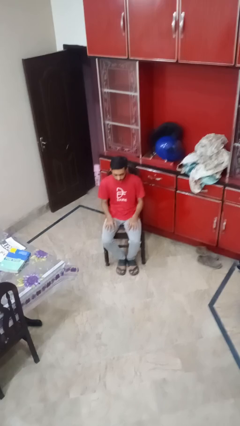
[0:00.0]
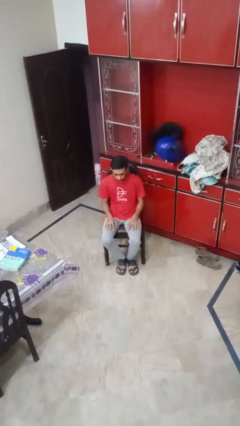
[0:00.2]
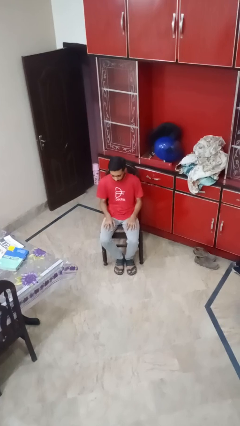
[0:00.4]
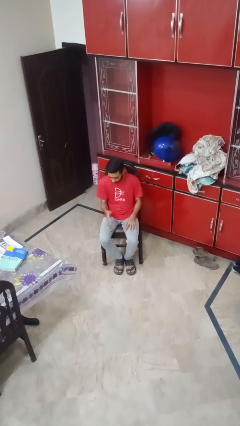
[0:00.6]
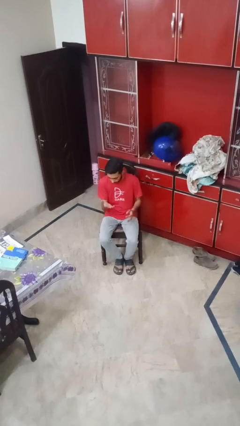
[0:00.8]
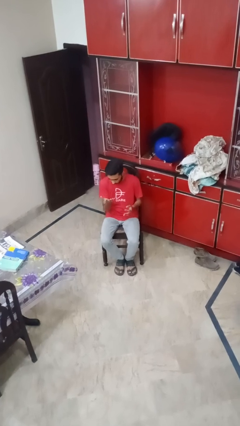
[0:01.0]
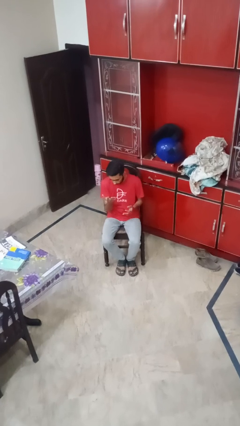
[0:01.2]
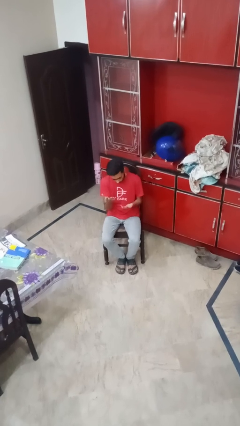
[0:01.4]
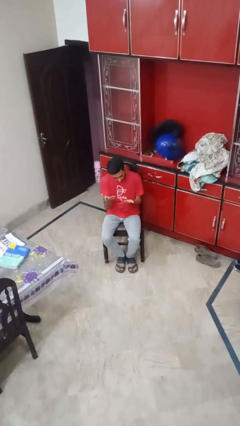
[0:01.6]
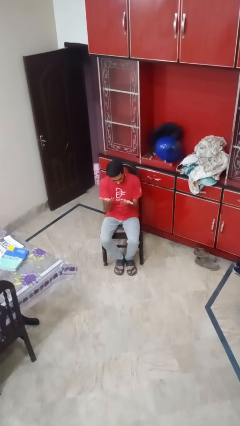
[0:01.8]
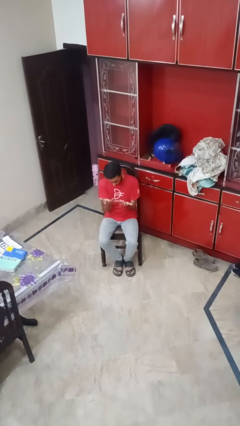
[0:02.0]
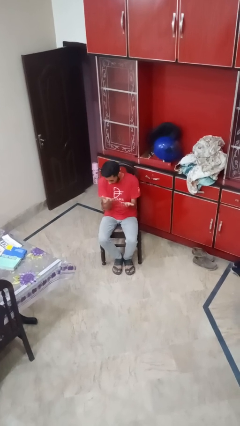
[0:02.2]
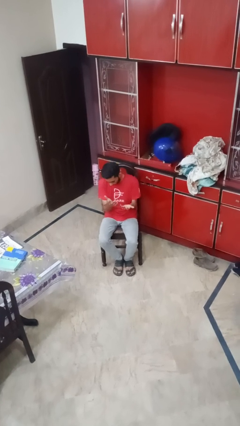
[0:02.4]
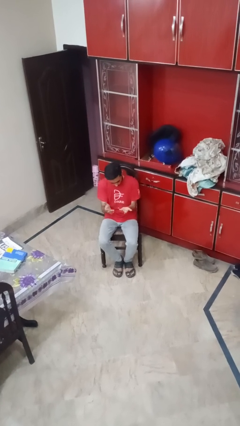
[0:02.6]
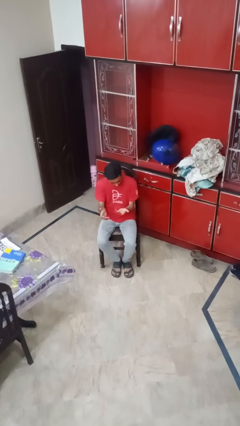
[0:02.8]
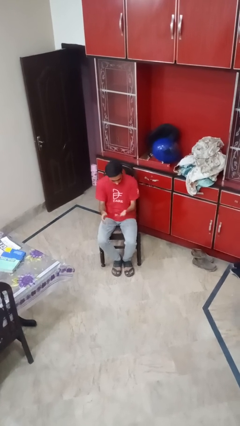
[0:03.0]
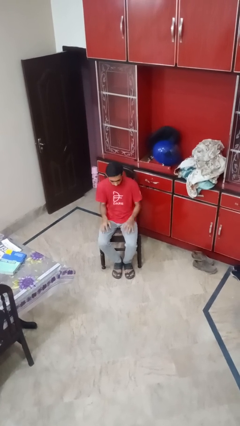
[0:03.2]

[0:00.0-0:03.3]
person looks at hands in lap

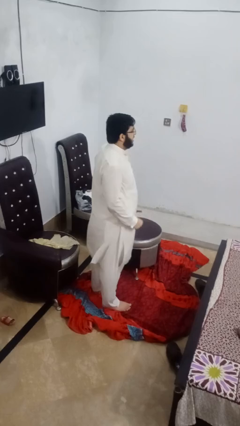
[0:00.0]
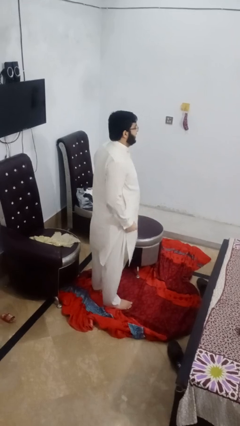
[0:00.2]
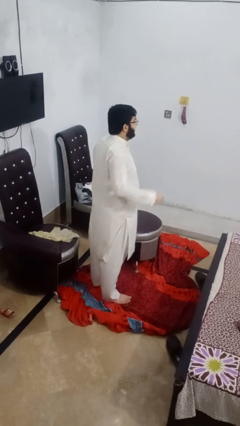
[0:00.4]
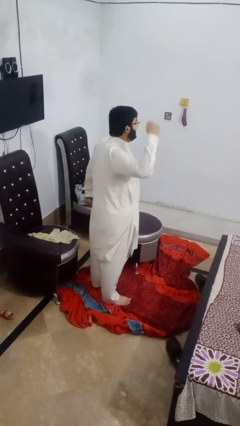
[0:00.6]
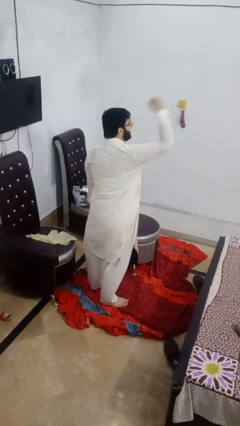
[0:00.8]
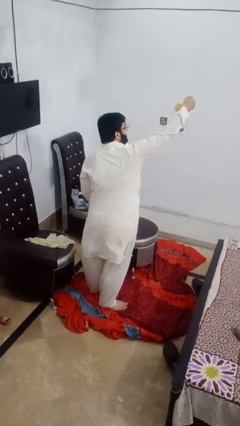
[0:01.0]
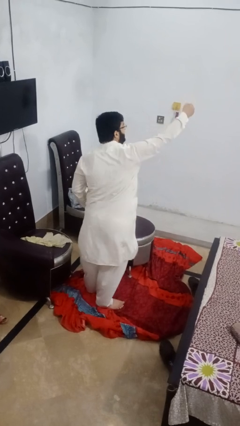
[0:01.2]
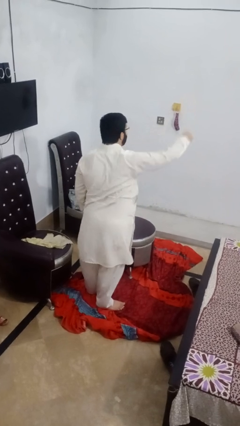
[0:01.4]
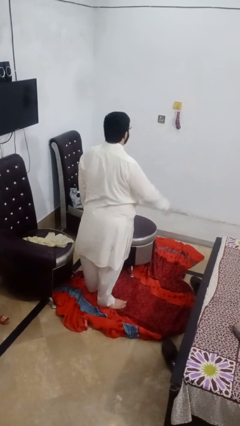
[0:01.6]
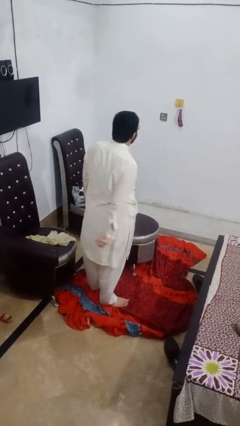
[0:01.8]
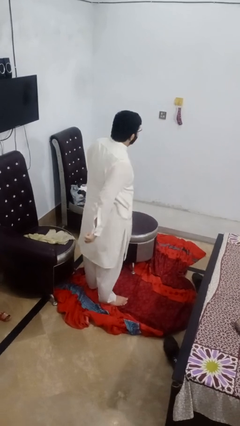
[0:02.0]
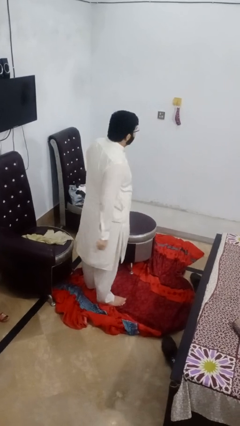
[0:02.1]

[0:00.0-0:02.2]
person punches

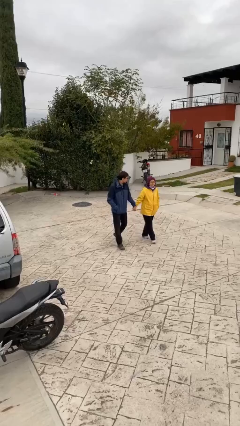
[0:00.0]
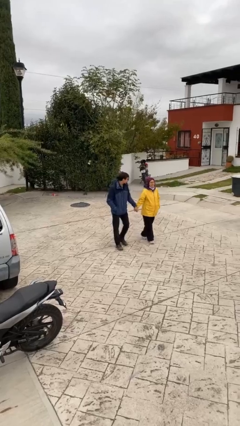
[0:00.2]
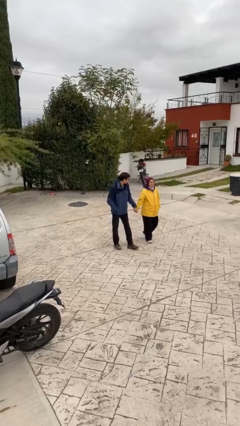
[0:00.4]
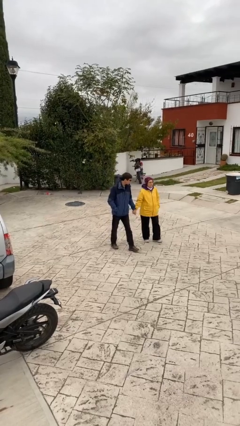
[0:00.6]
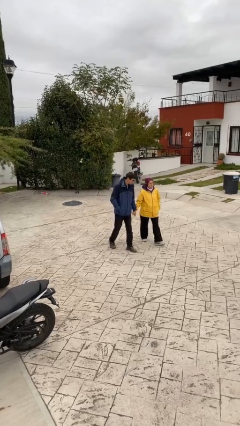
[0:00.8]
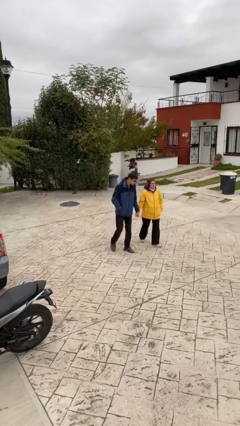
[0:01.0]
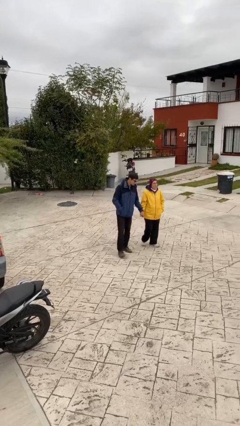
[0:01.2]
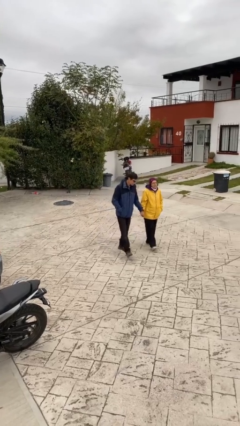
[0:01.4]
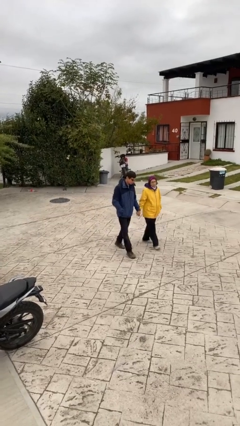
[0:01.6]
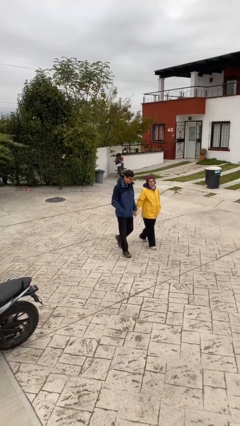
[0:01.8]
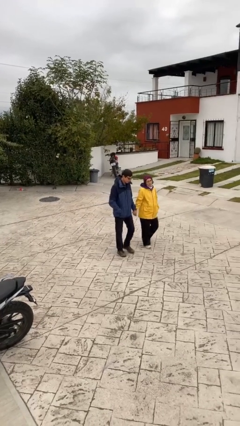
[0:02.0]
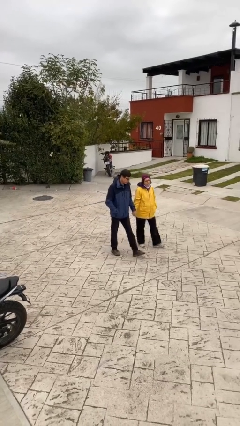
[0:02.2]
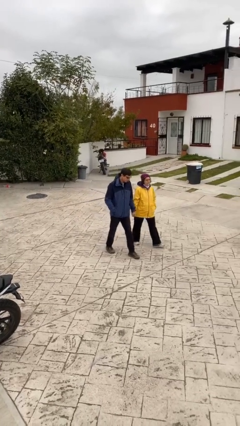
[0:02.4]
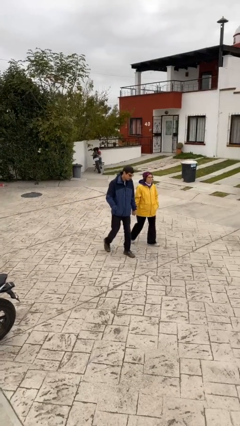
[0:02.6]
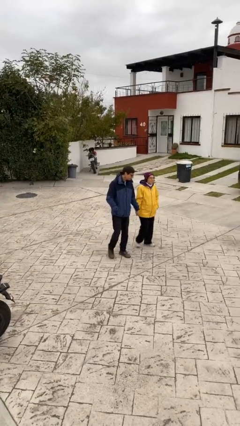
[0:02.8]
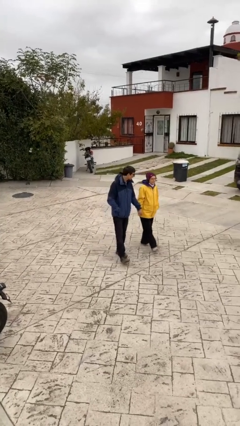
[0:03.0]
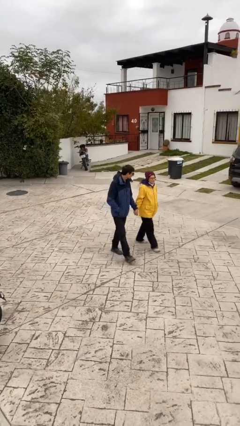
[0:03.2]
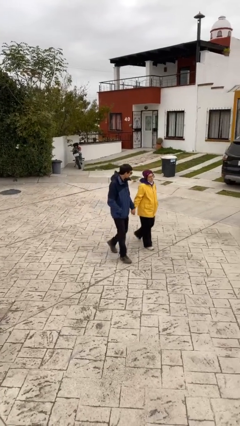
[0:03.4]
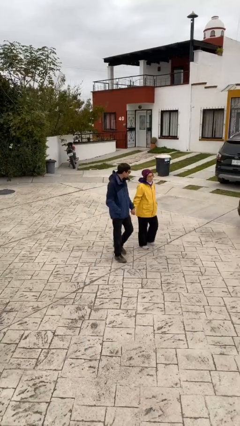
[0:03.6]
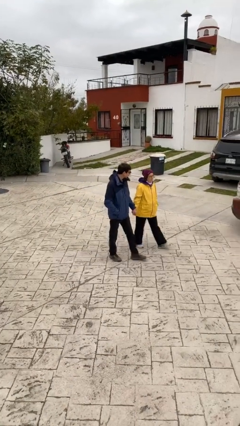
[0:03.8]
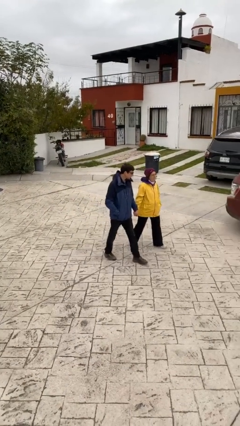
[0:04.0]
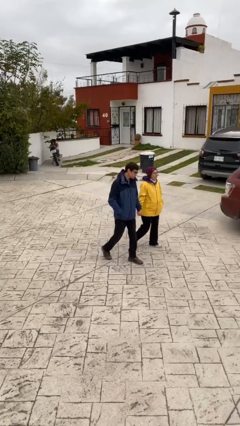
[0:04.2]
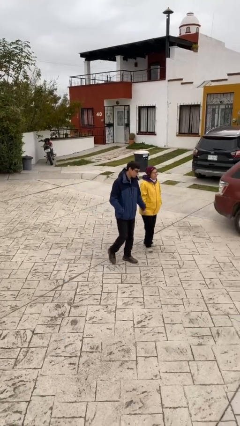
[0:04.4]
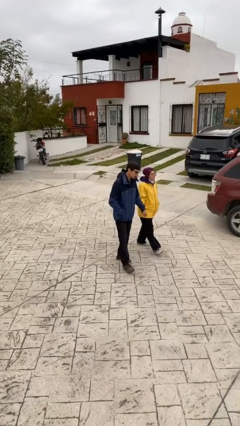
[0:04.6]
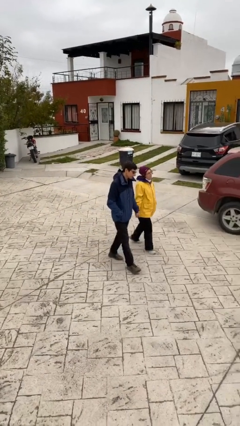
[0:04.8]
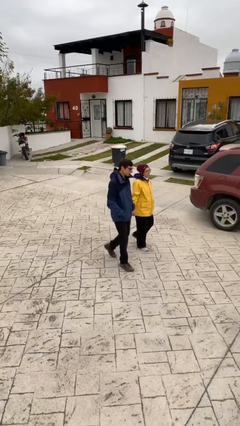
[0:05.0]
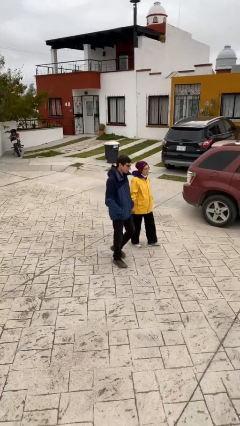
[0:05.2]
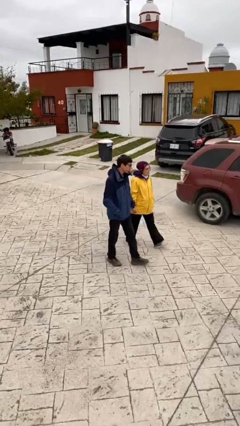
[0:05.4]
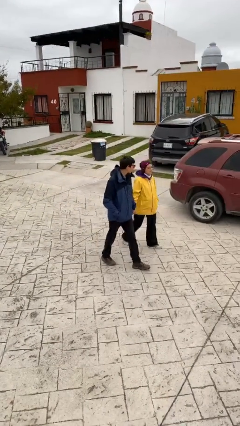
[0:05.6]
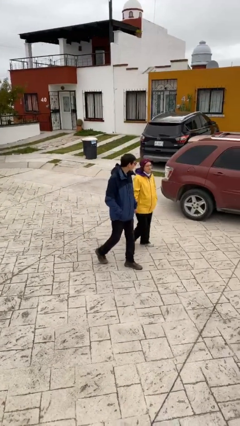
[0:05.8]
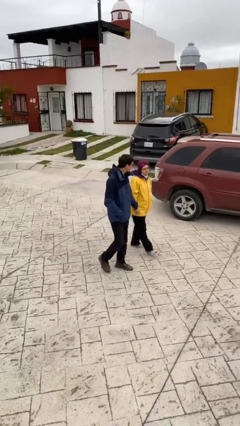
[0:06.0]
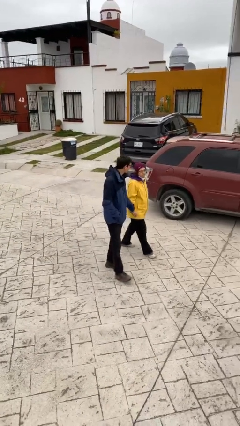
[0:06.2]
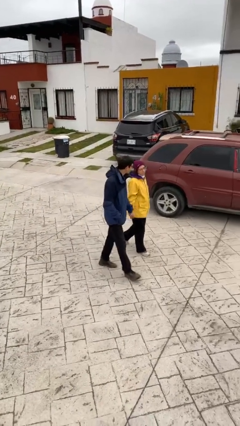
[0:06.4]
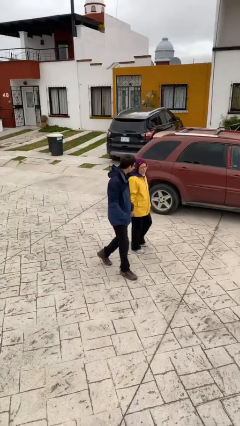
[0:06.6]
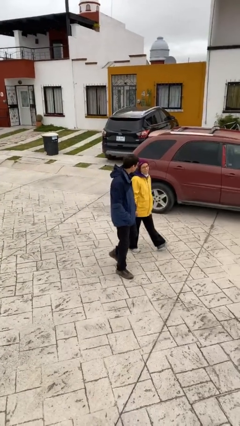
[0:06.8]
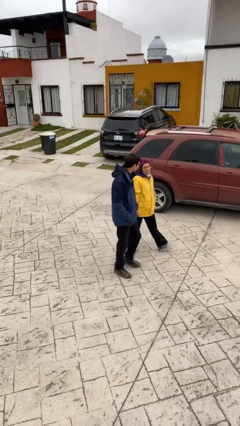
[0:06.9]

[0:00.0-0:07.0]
person holds hand

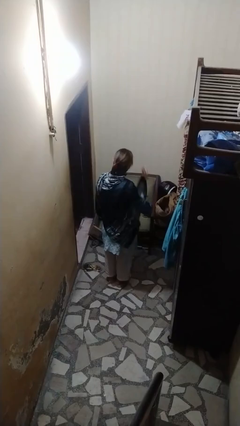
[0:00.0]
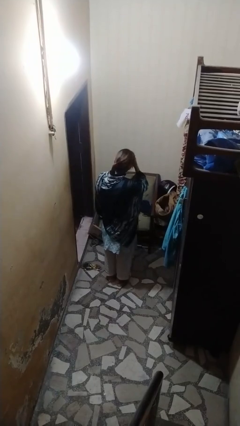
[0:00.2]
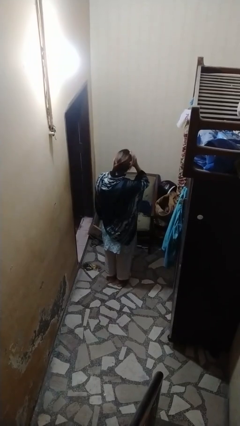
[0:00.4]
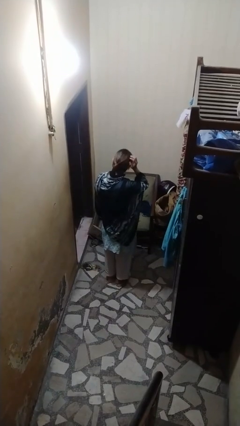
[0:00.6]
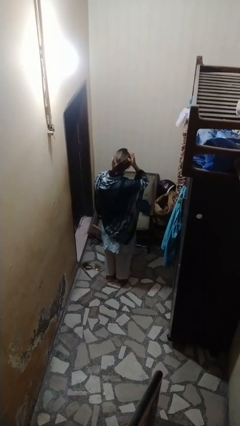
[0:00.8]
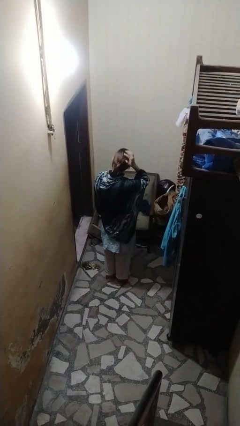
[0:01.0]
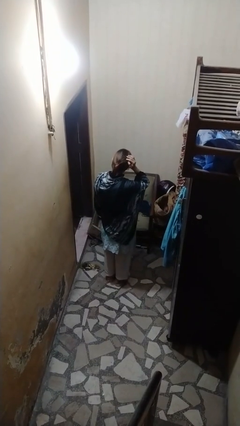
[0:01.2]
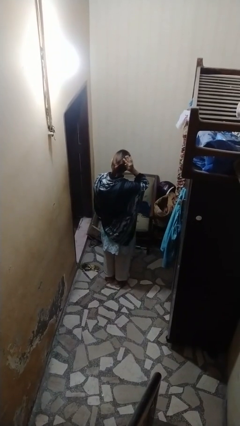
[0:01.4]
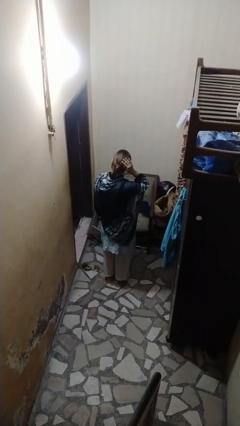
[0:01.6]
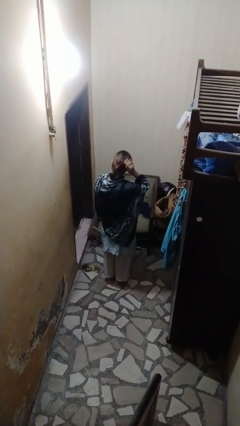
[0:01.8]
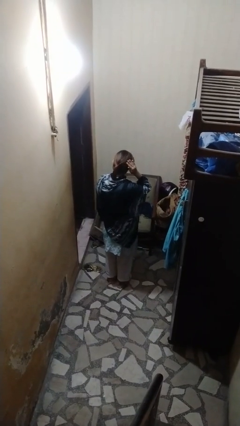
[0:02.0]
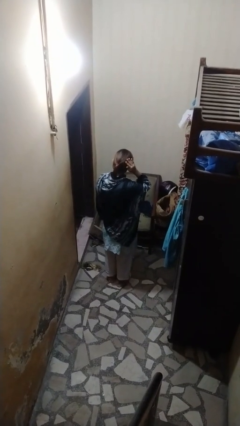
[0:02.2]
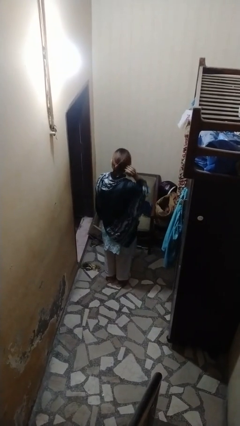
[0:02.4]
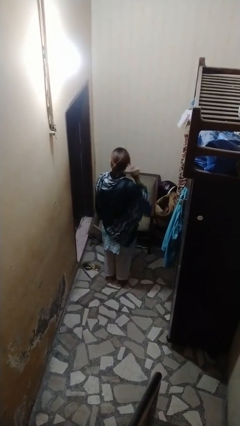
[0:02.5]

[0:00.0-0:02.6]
person strokes hair

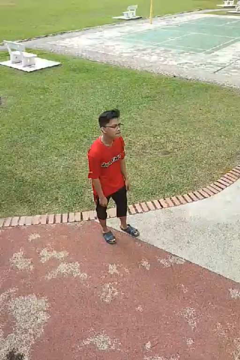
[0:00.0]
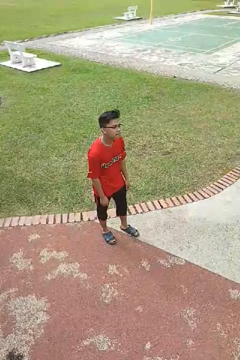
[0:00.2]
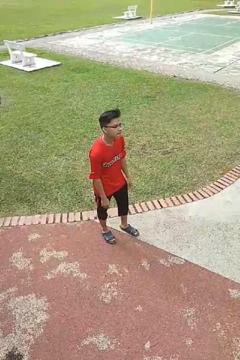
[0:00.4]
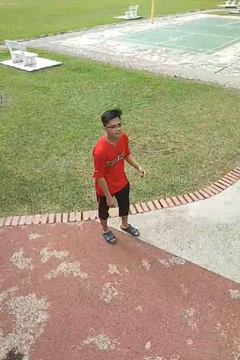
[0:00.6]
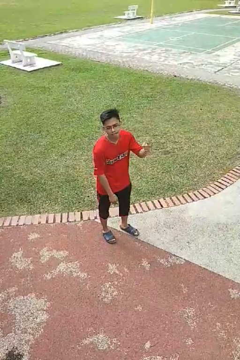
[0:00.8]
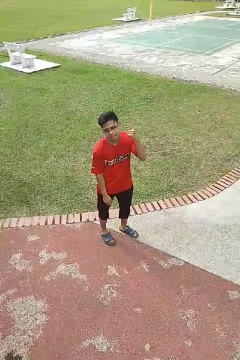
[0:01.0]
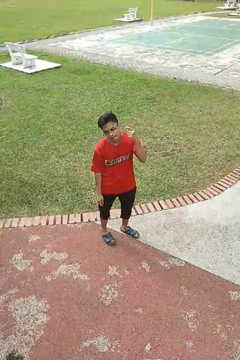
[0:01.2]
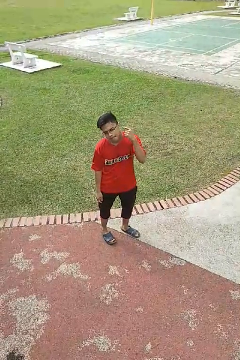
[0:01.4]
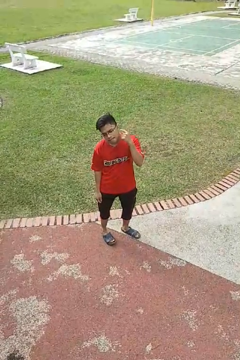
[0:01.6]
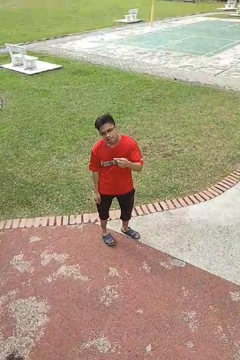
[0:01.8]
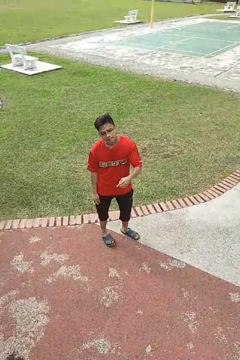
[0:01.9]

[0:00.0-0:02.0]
person gestures listen closely

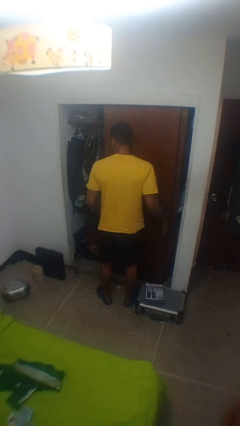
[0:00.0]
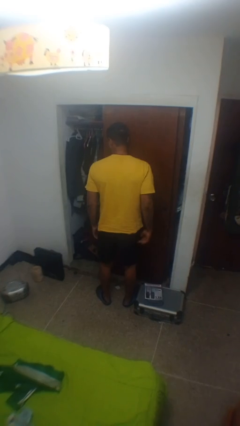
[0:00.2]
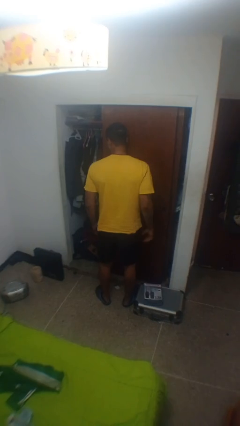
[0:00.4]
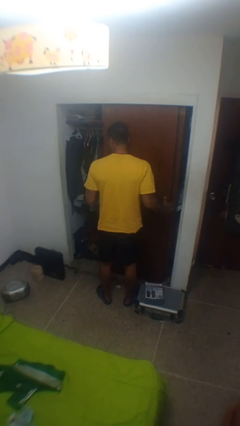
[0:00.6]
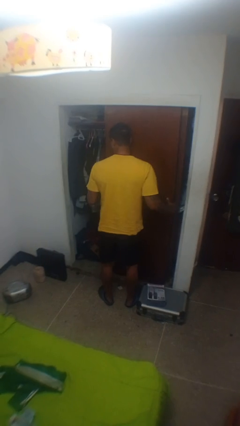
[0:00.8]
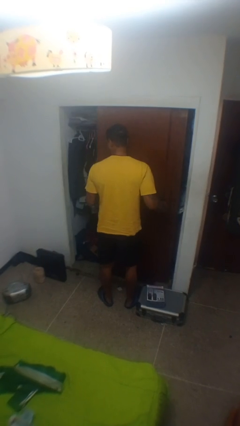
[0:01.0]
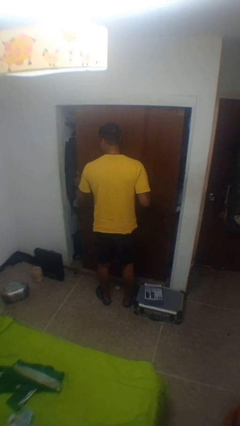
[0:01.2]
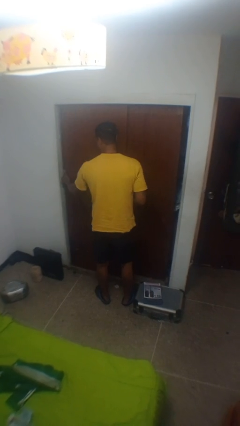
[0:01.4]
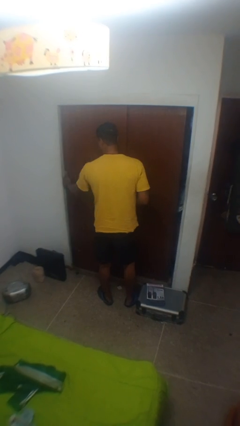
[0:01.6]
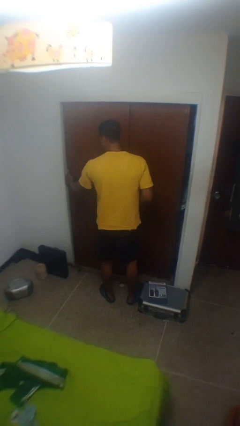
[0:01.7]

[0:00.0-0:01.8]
person closes closet door
